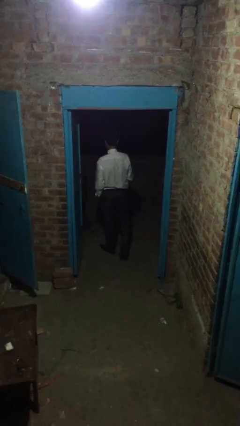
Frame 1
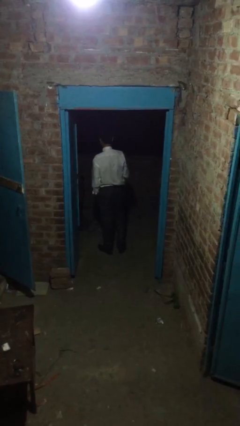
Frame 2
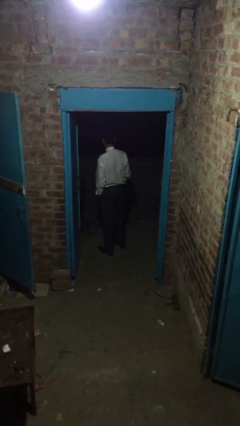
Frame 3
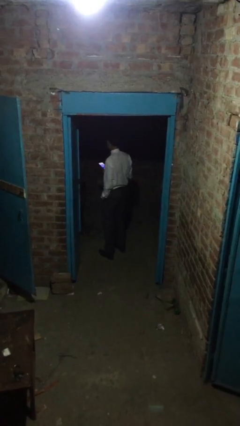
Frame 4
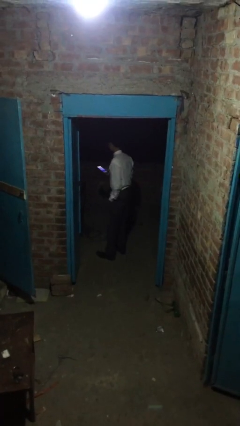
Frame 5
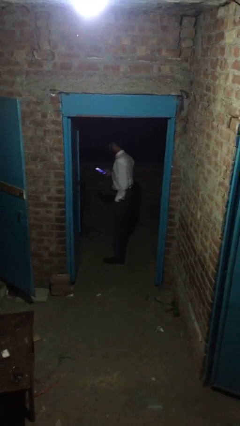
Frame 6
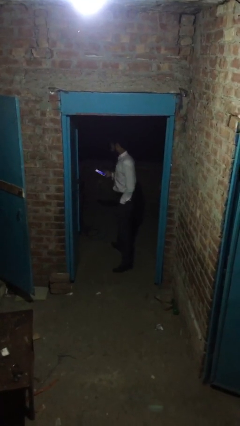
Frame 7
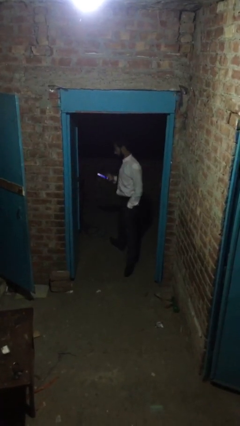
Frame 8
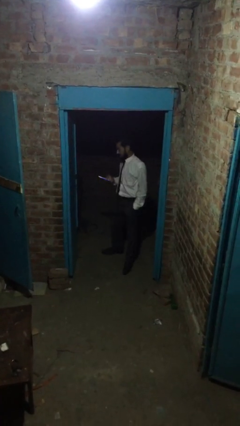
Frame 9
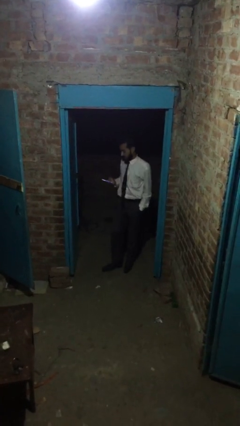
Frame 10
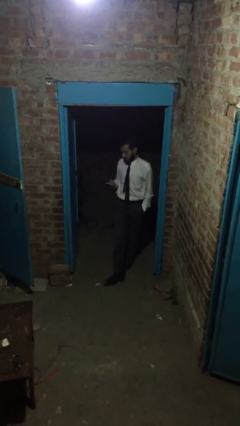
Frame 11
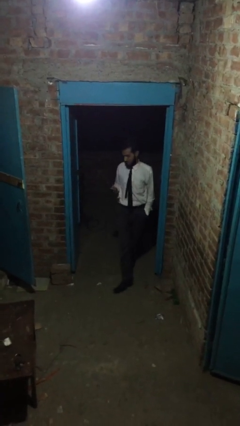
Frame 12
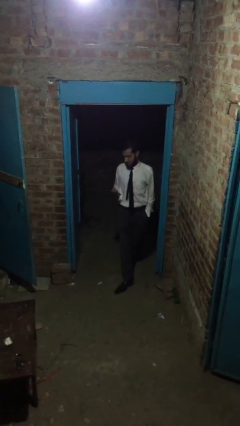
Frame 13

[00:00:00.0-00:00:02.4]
person enters scene through structure

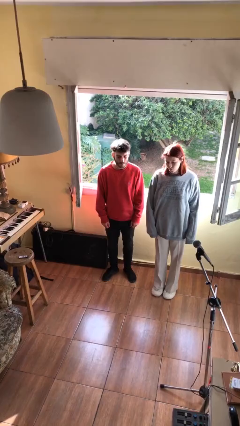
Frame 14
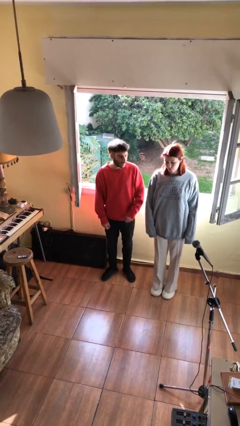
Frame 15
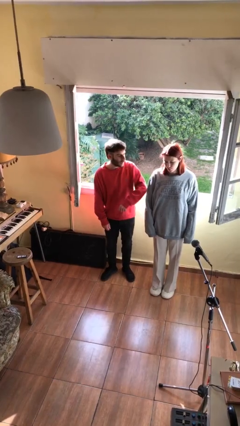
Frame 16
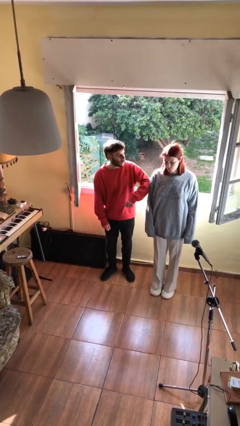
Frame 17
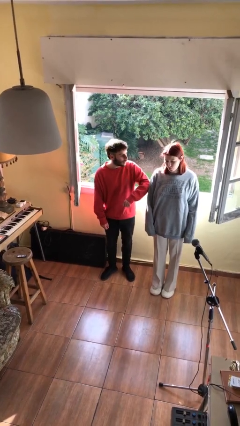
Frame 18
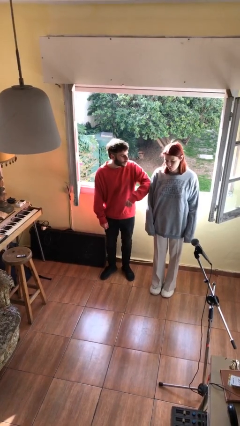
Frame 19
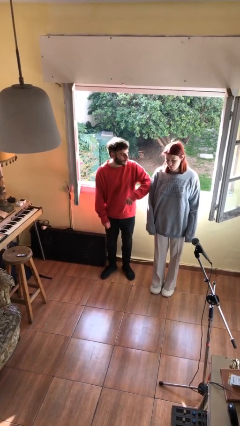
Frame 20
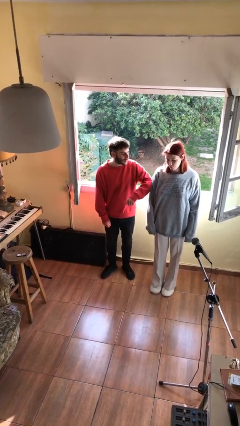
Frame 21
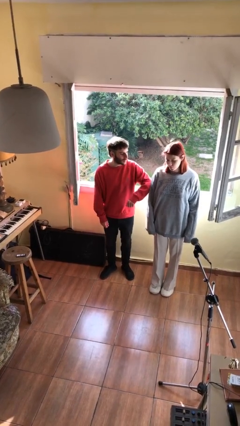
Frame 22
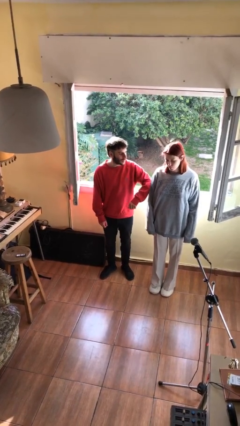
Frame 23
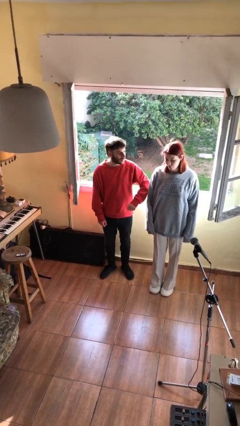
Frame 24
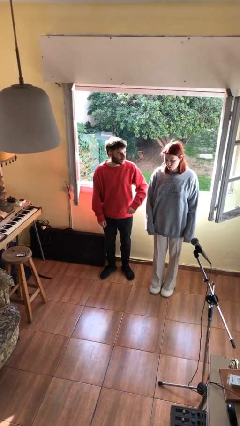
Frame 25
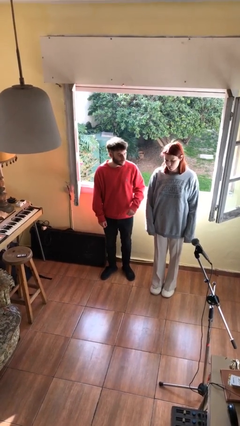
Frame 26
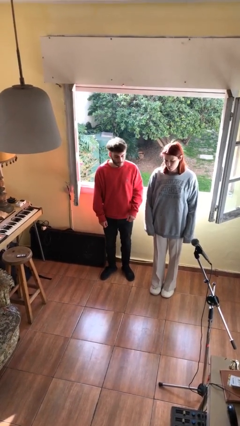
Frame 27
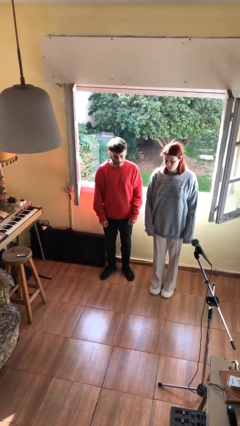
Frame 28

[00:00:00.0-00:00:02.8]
person nudges person with elbow

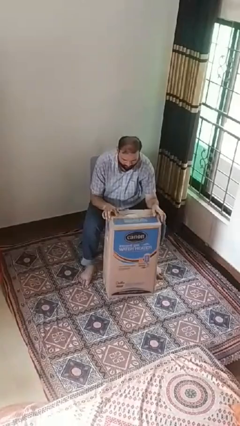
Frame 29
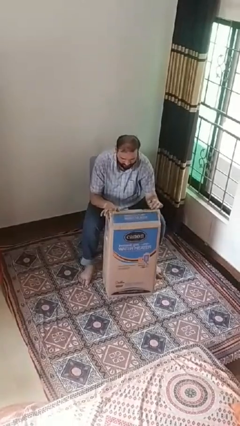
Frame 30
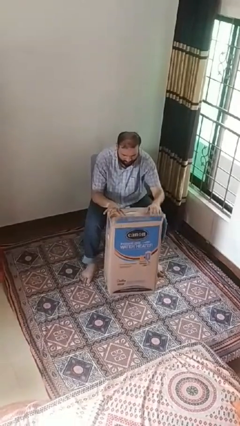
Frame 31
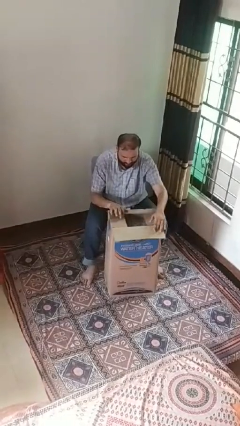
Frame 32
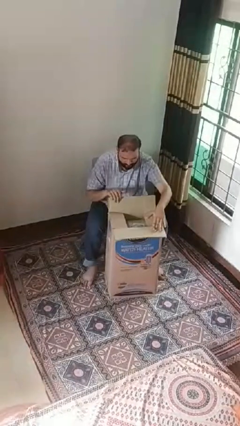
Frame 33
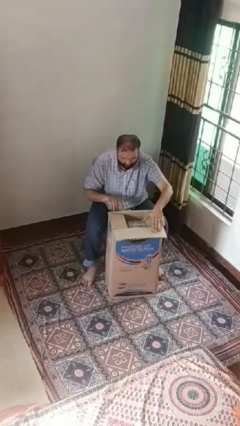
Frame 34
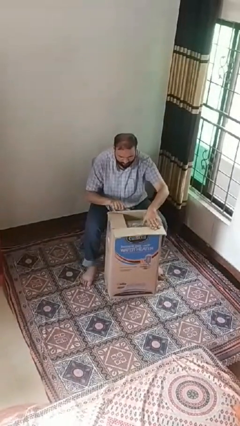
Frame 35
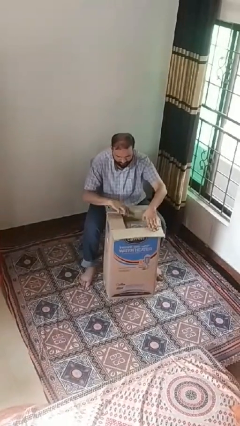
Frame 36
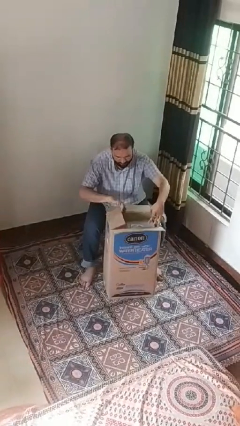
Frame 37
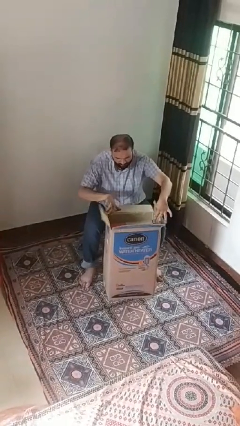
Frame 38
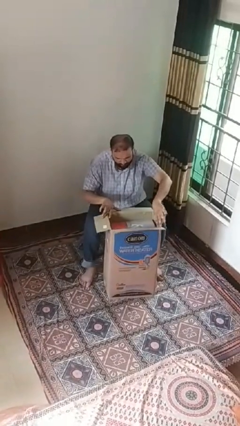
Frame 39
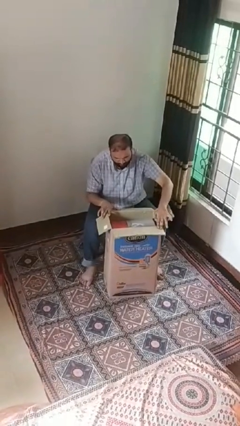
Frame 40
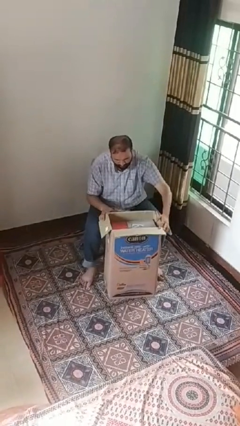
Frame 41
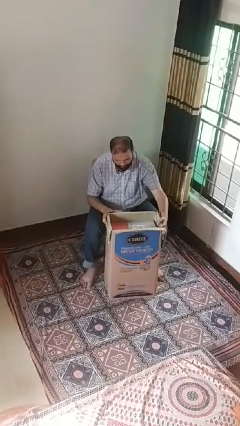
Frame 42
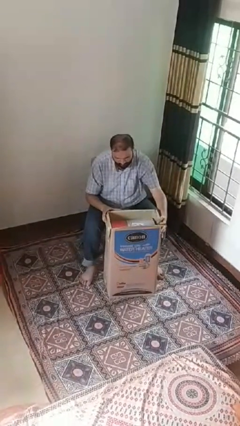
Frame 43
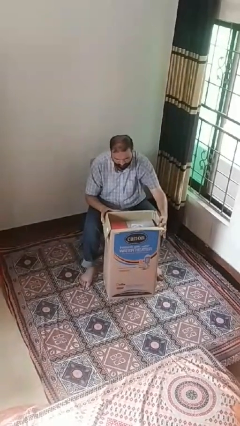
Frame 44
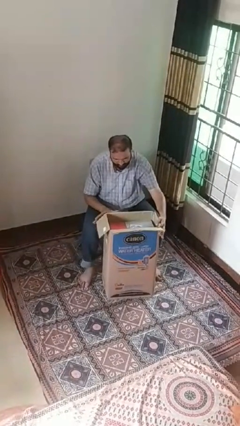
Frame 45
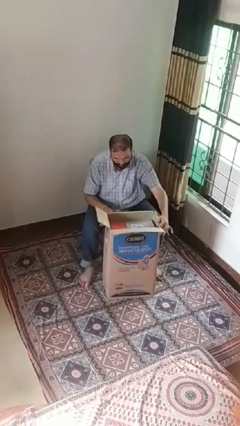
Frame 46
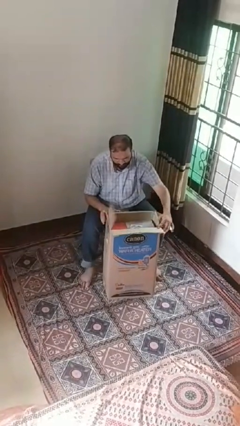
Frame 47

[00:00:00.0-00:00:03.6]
person opens box

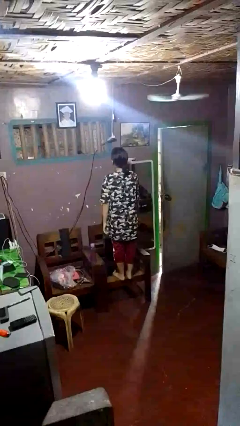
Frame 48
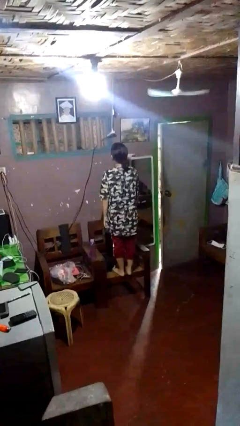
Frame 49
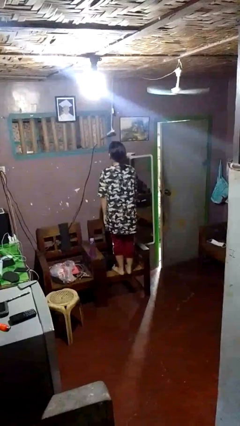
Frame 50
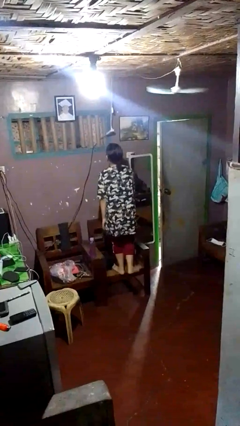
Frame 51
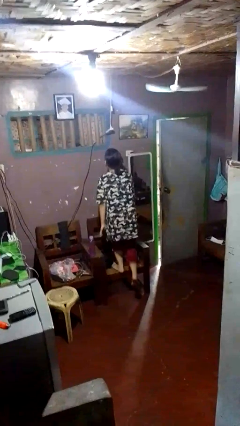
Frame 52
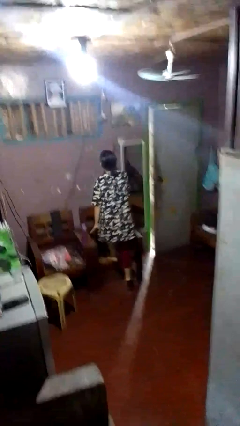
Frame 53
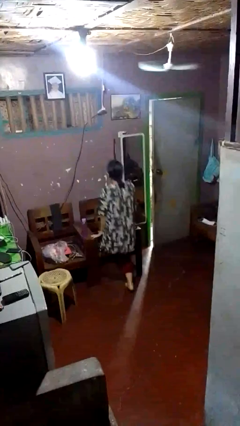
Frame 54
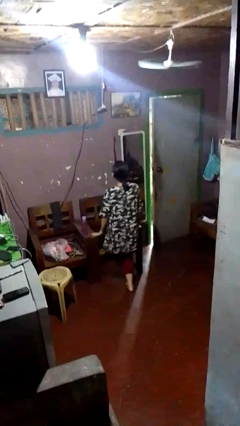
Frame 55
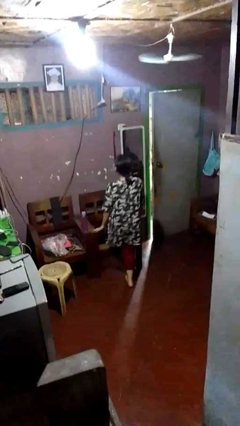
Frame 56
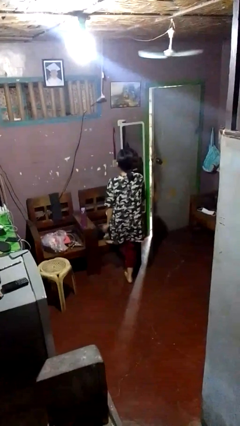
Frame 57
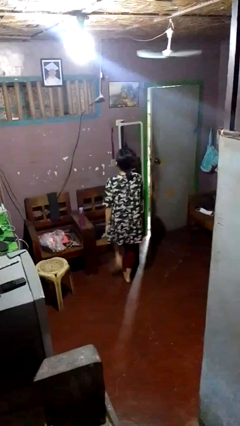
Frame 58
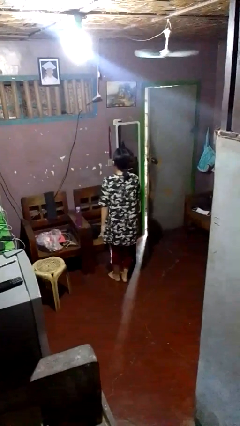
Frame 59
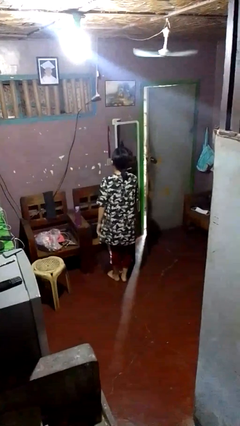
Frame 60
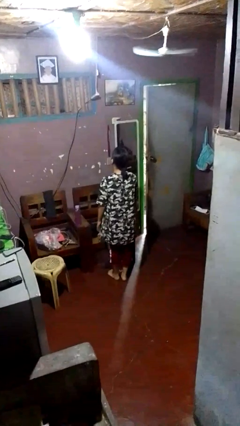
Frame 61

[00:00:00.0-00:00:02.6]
person climbs off chair

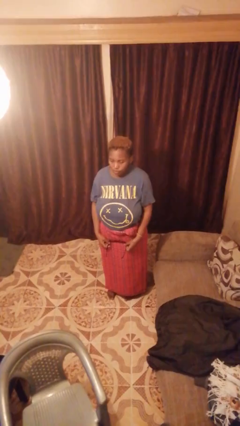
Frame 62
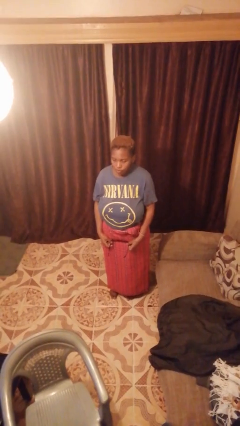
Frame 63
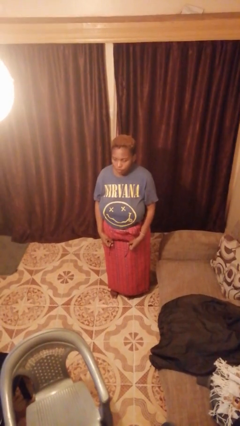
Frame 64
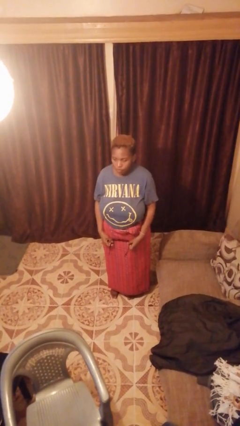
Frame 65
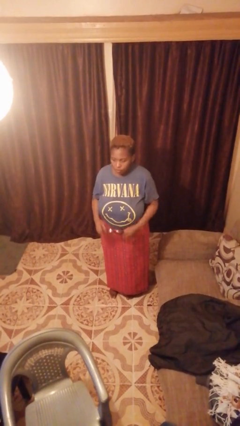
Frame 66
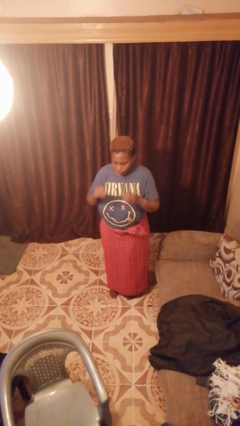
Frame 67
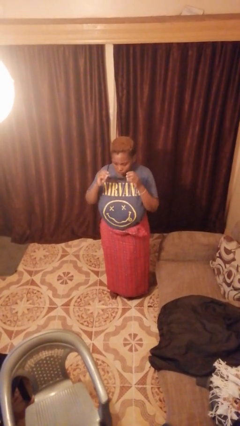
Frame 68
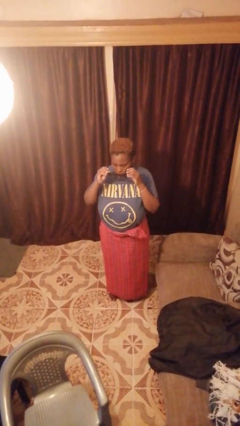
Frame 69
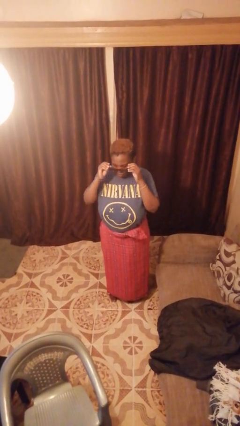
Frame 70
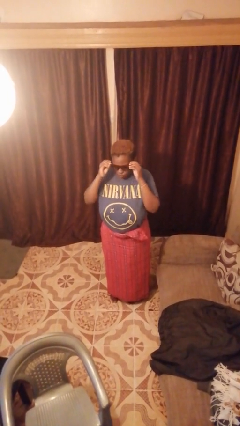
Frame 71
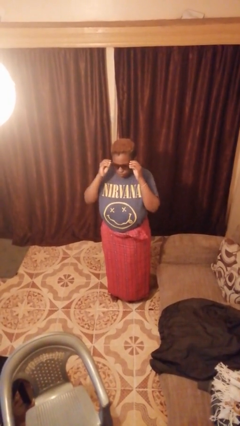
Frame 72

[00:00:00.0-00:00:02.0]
person puts on sunglasses

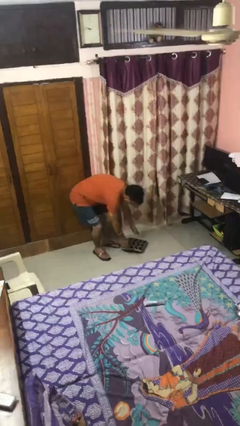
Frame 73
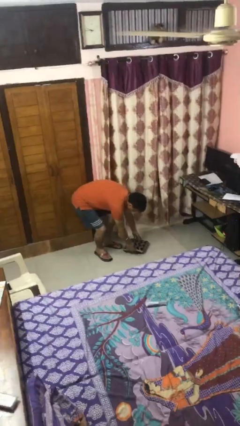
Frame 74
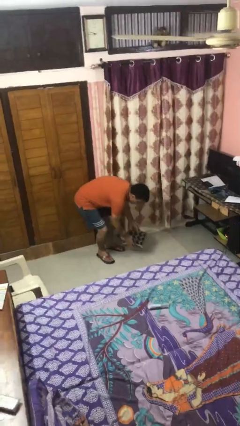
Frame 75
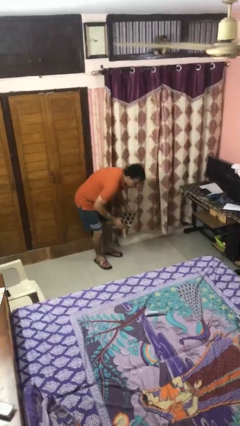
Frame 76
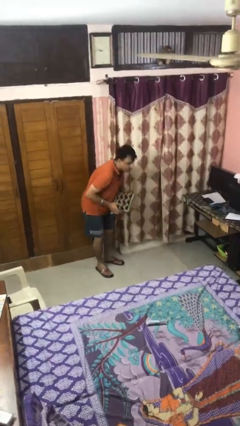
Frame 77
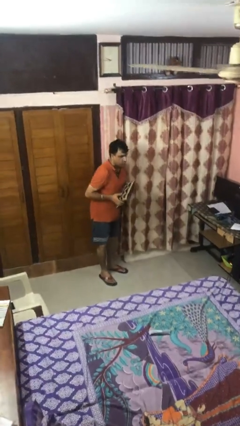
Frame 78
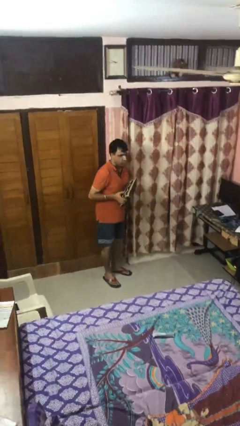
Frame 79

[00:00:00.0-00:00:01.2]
person picks up object from floor

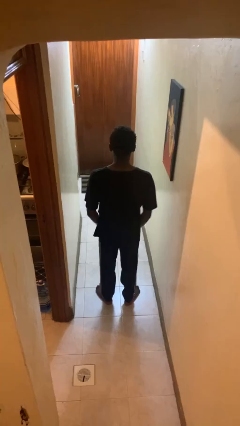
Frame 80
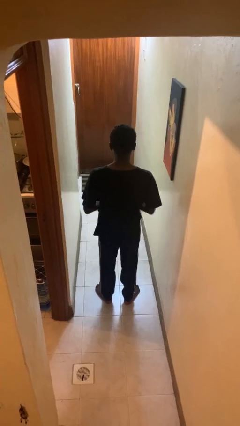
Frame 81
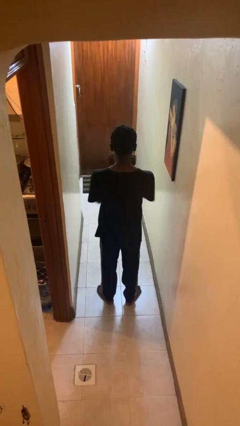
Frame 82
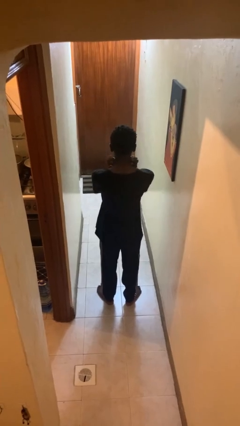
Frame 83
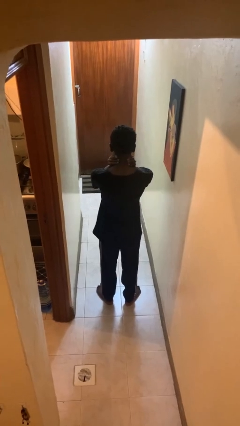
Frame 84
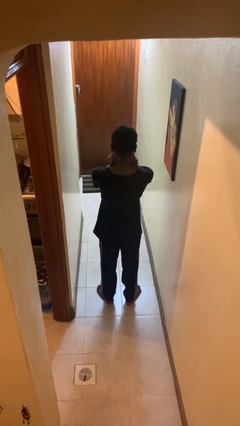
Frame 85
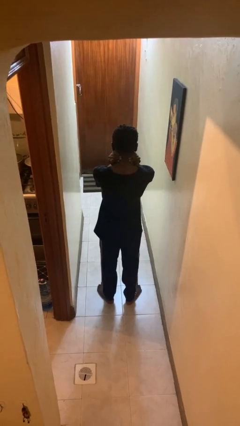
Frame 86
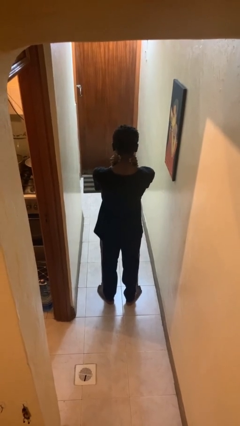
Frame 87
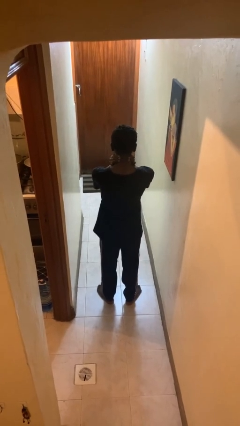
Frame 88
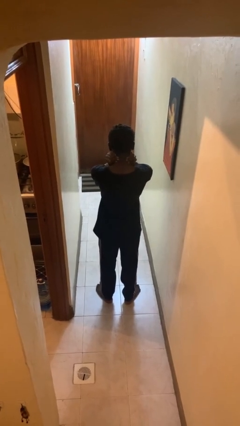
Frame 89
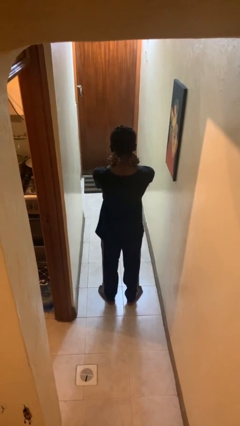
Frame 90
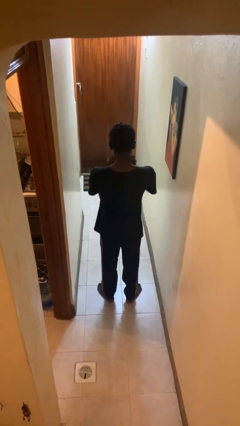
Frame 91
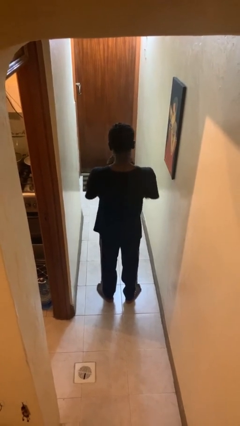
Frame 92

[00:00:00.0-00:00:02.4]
person rubs neck
